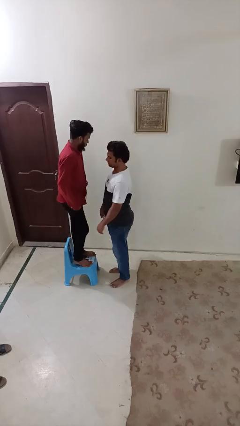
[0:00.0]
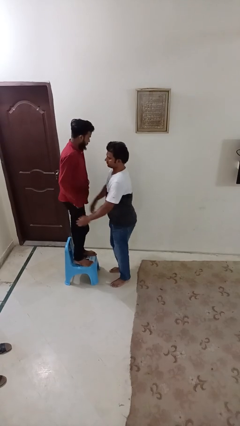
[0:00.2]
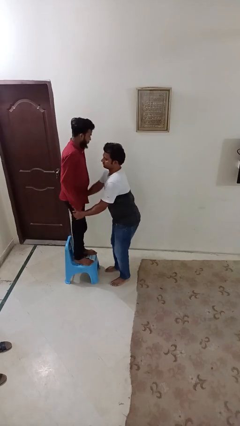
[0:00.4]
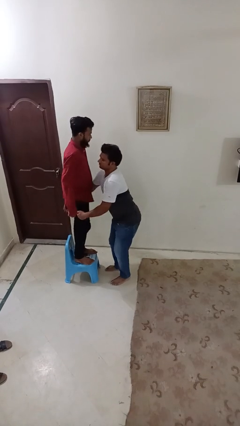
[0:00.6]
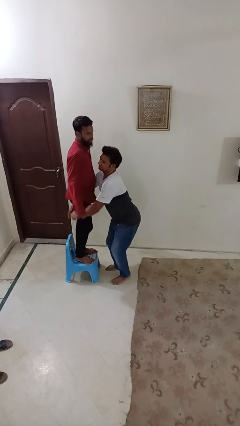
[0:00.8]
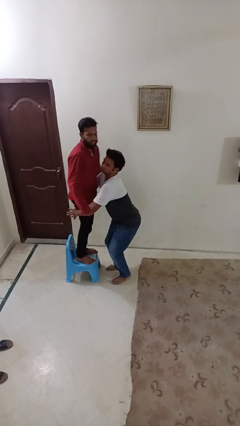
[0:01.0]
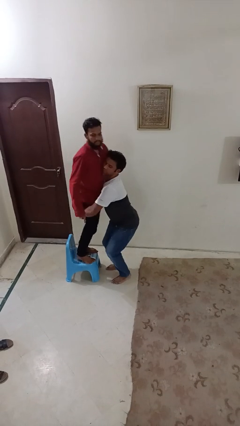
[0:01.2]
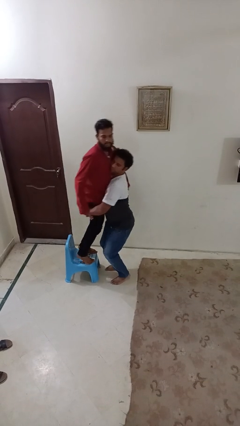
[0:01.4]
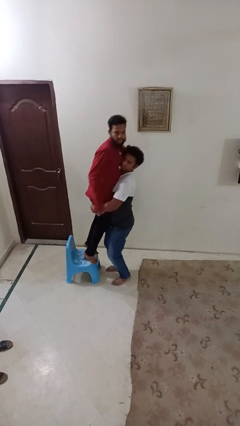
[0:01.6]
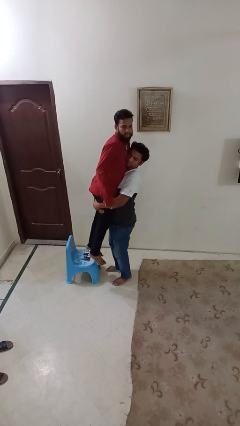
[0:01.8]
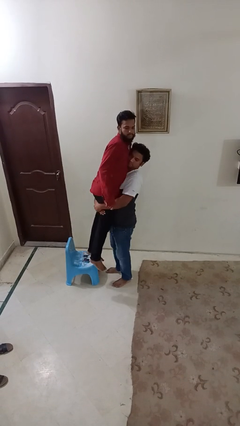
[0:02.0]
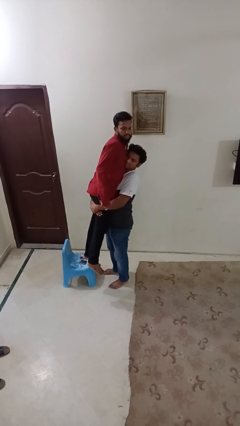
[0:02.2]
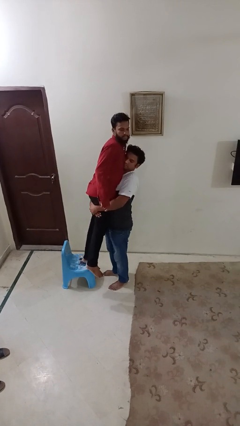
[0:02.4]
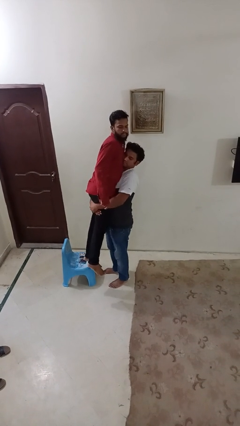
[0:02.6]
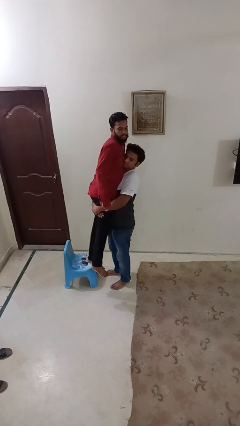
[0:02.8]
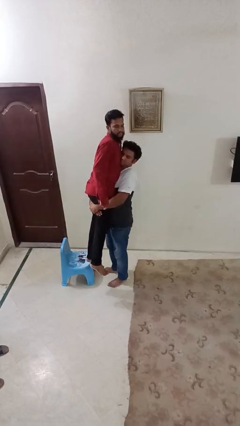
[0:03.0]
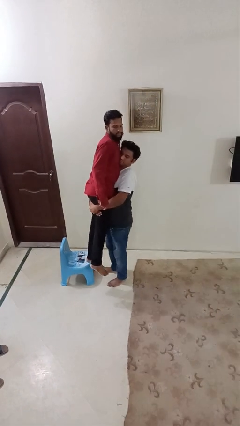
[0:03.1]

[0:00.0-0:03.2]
person picks up person

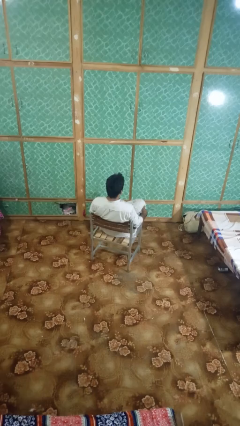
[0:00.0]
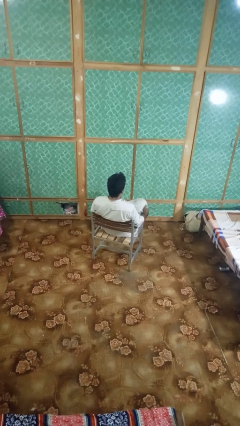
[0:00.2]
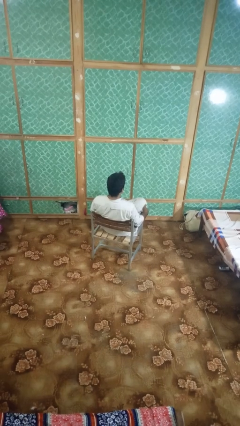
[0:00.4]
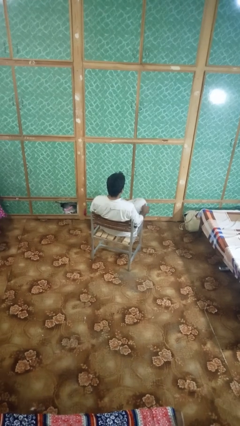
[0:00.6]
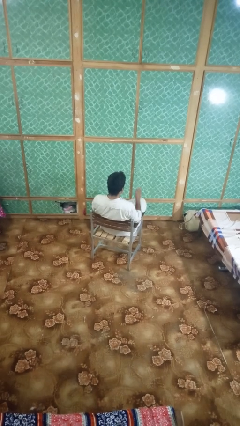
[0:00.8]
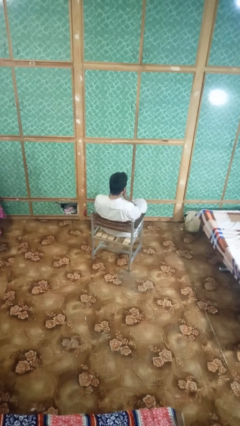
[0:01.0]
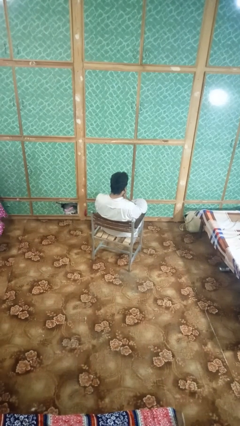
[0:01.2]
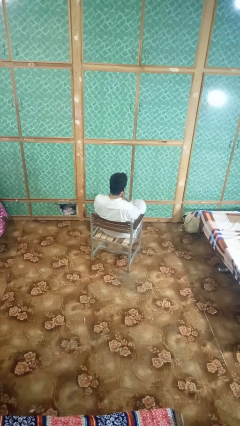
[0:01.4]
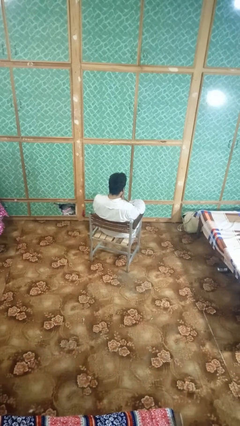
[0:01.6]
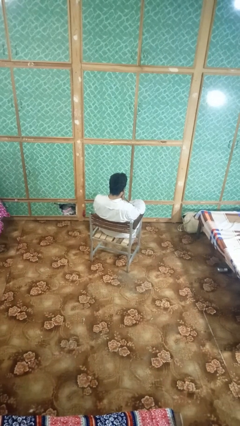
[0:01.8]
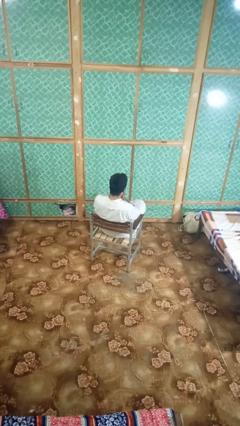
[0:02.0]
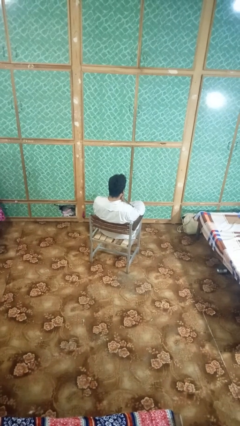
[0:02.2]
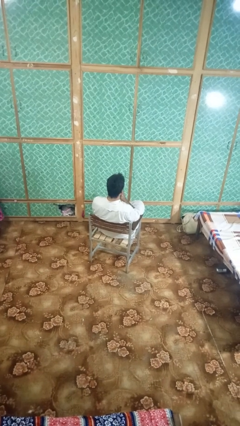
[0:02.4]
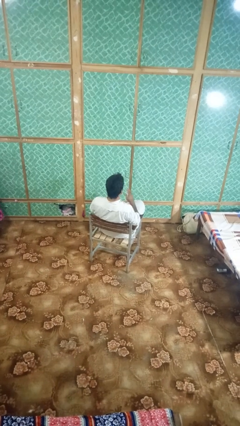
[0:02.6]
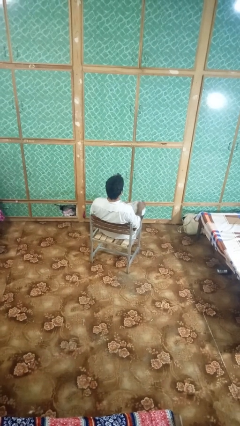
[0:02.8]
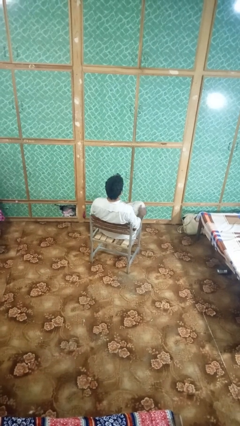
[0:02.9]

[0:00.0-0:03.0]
person sneezes into hand

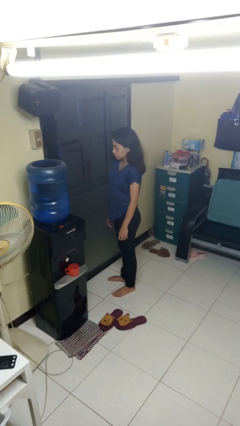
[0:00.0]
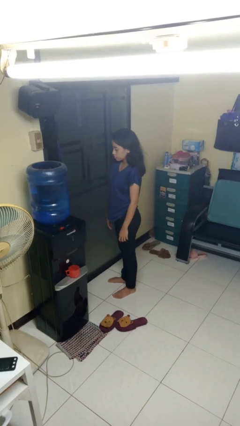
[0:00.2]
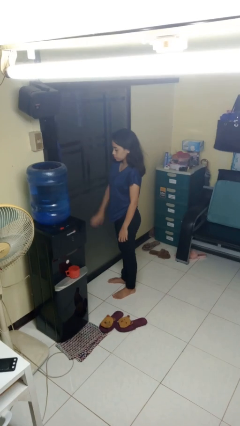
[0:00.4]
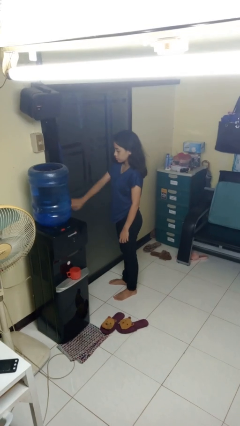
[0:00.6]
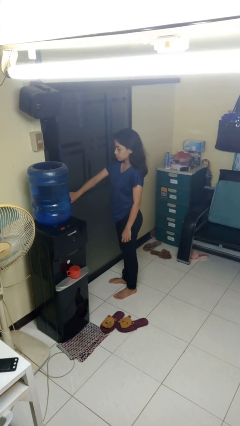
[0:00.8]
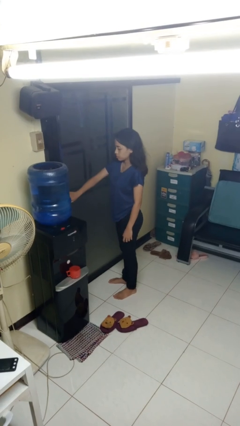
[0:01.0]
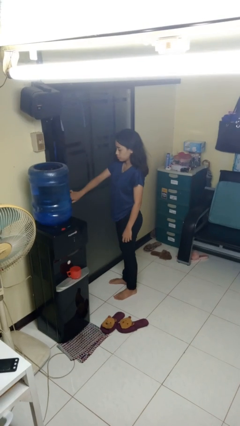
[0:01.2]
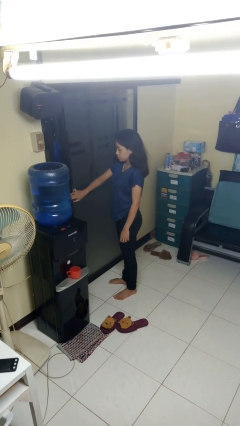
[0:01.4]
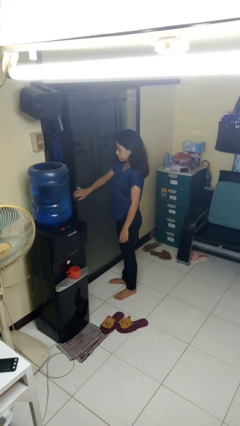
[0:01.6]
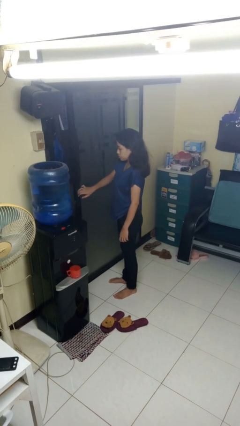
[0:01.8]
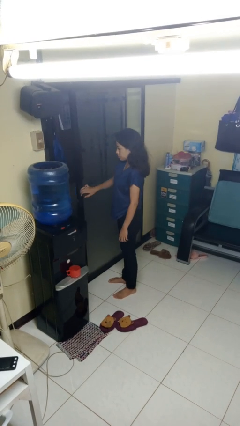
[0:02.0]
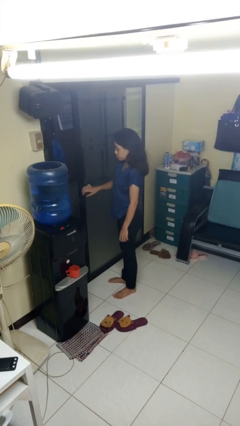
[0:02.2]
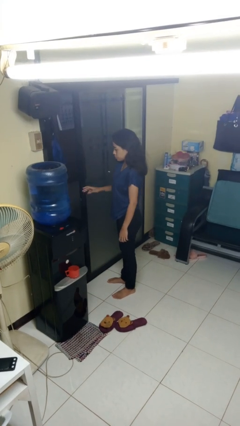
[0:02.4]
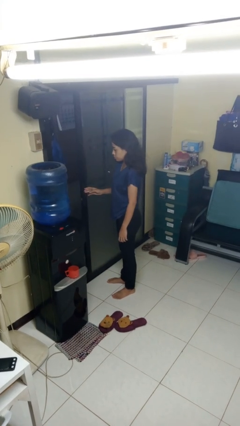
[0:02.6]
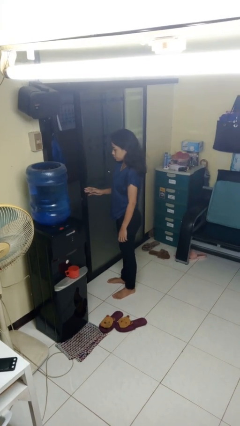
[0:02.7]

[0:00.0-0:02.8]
person opens sliding door

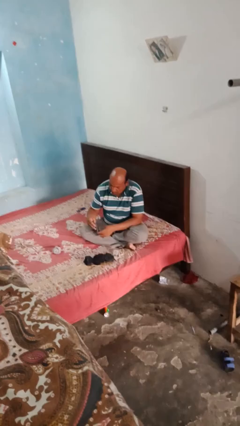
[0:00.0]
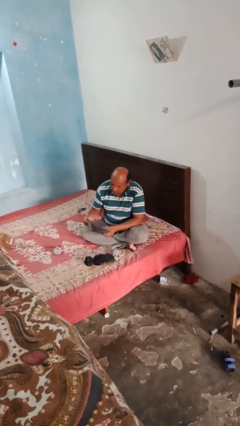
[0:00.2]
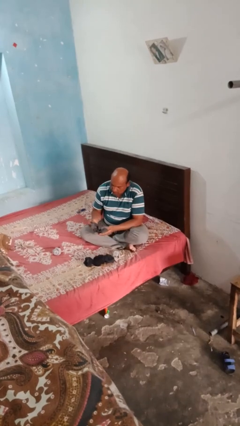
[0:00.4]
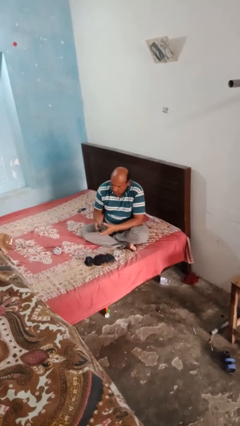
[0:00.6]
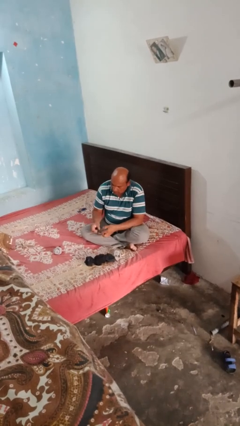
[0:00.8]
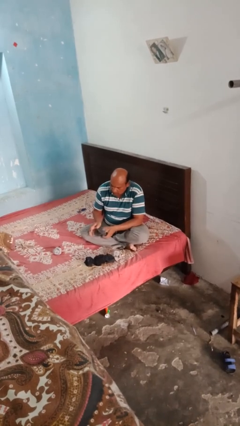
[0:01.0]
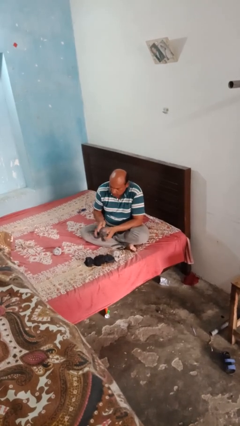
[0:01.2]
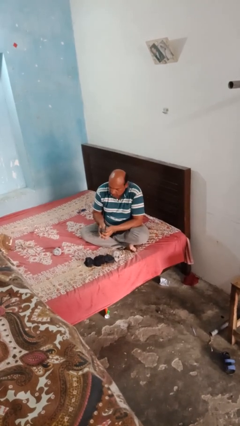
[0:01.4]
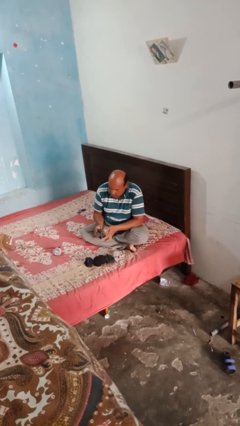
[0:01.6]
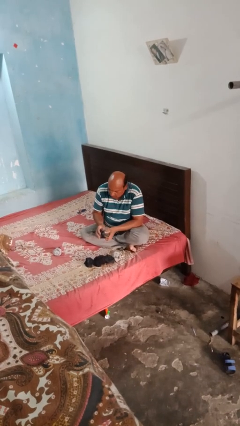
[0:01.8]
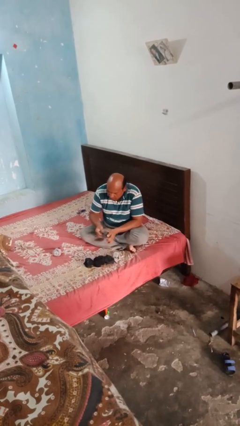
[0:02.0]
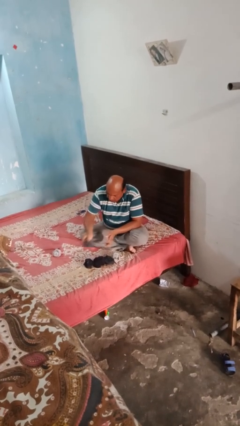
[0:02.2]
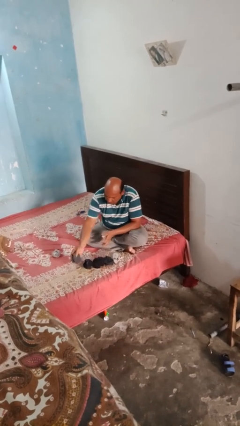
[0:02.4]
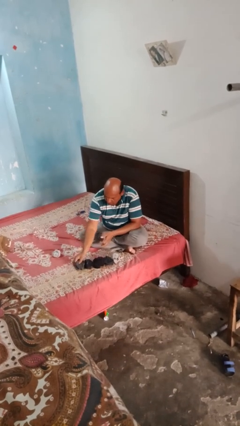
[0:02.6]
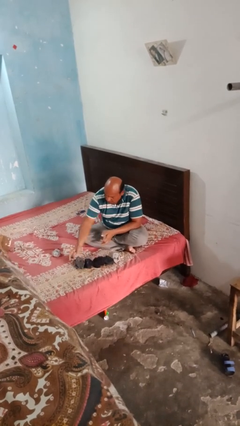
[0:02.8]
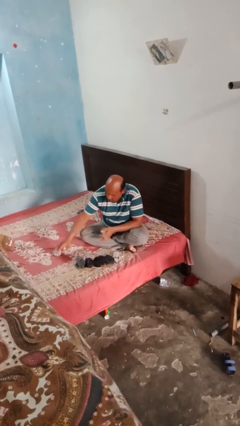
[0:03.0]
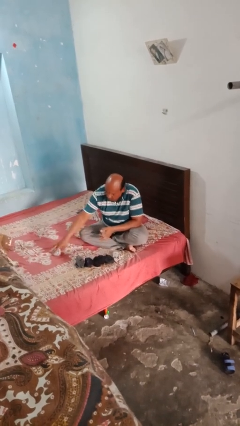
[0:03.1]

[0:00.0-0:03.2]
person folds socks

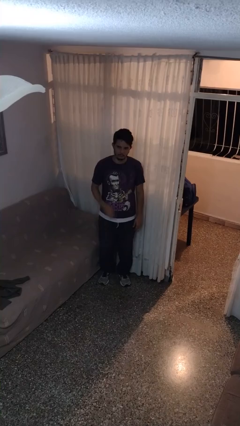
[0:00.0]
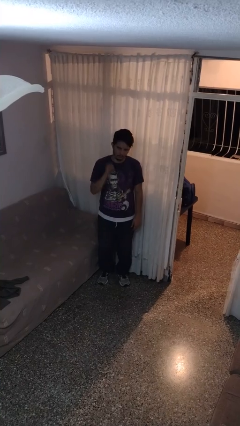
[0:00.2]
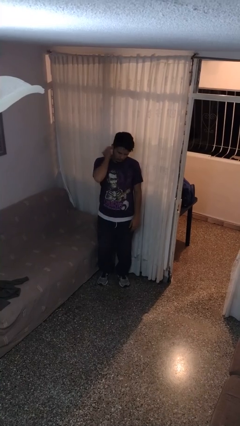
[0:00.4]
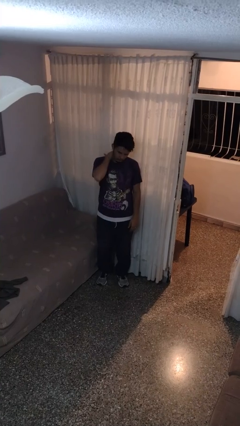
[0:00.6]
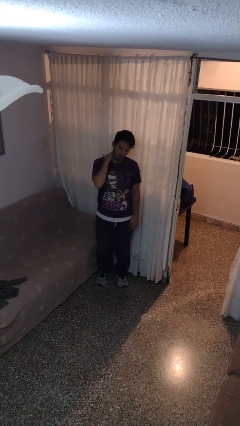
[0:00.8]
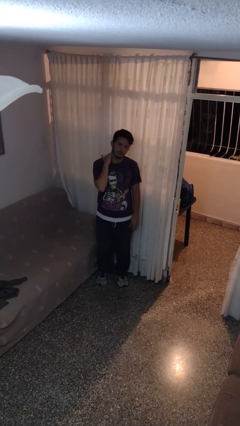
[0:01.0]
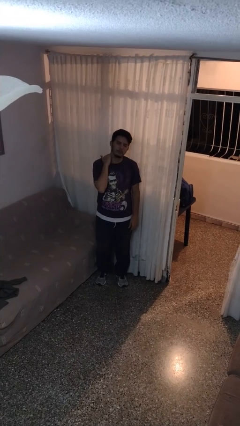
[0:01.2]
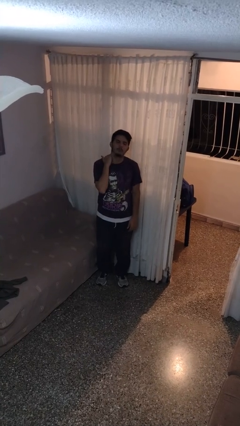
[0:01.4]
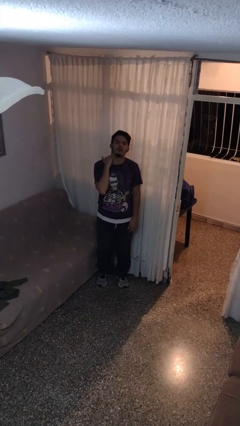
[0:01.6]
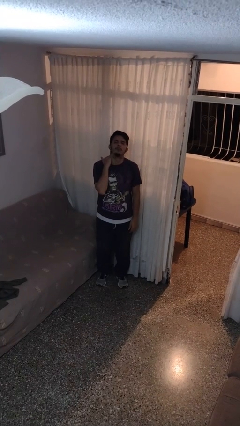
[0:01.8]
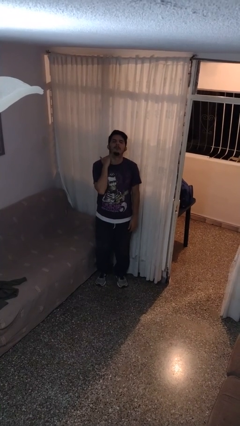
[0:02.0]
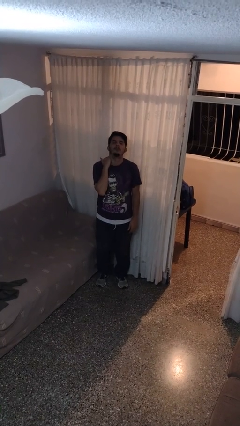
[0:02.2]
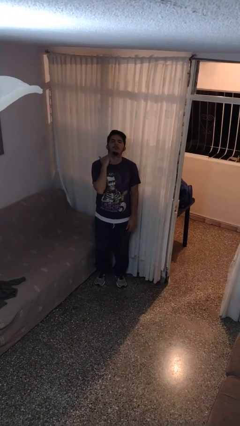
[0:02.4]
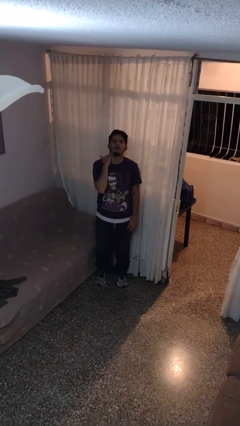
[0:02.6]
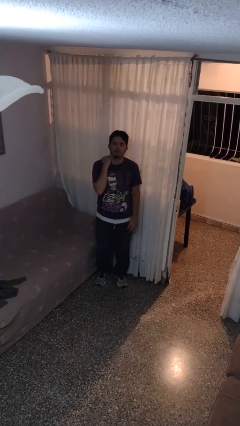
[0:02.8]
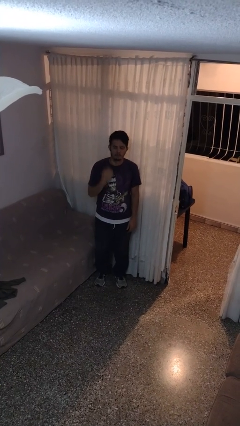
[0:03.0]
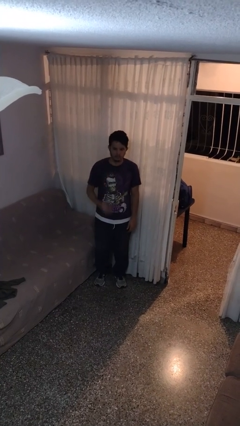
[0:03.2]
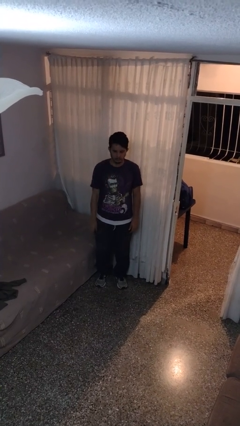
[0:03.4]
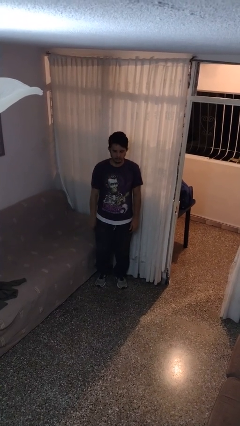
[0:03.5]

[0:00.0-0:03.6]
person rubs neck

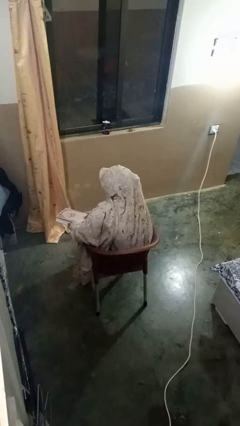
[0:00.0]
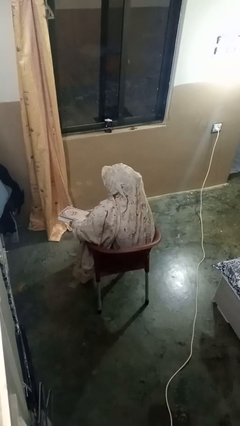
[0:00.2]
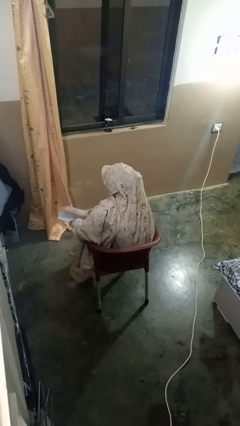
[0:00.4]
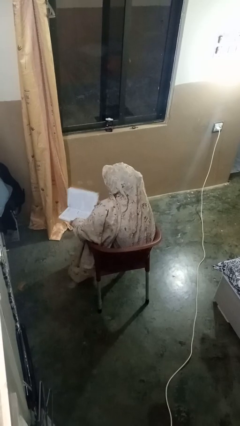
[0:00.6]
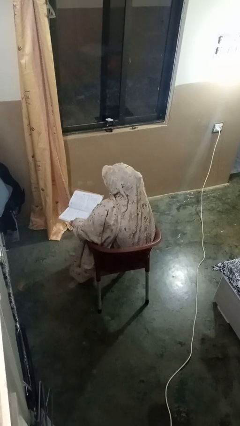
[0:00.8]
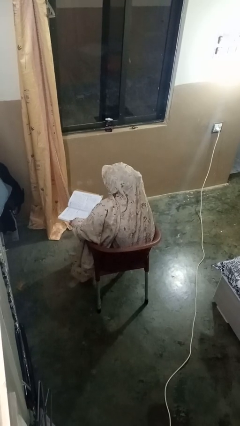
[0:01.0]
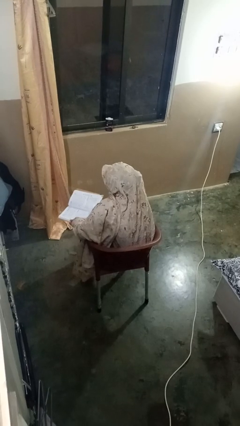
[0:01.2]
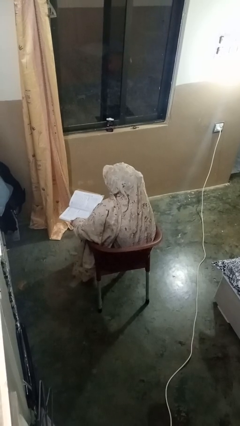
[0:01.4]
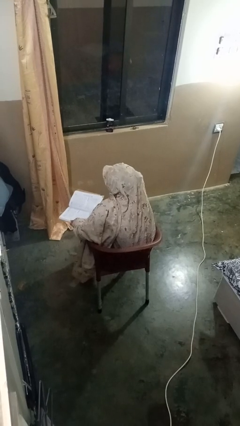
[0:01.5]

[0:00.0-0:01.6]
person reads book
